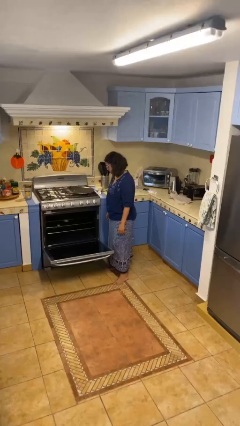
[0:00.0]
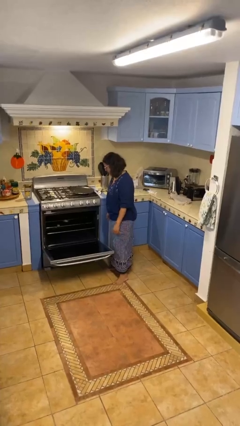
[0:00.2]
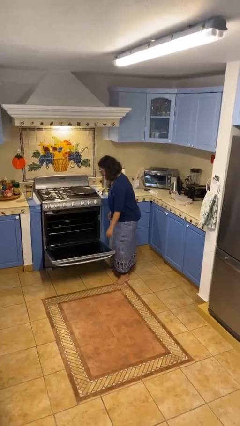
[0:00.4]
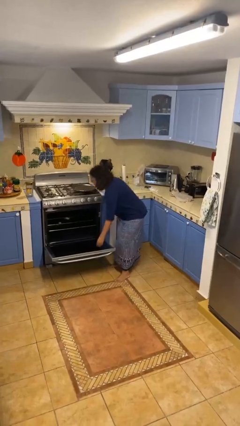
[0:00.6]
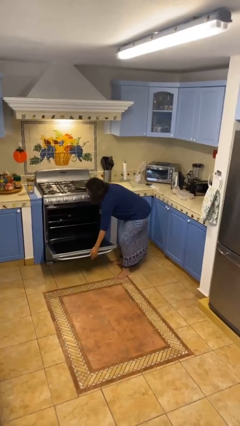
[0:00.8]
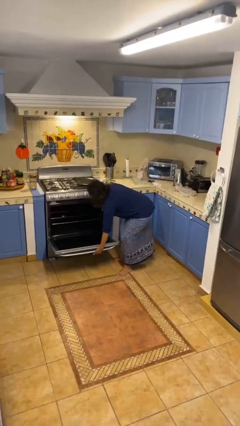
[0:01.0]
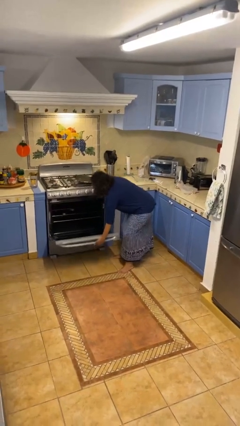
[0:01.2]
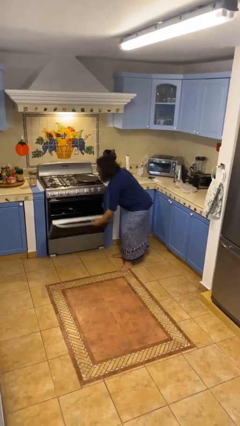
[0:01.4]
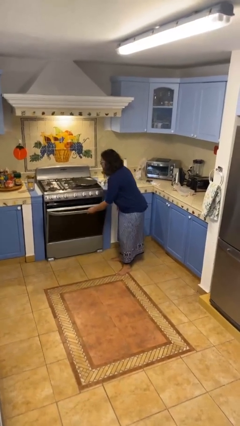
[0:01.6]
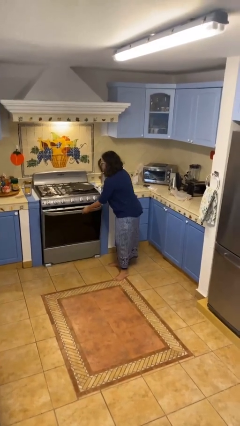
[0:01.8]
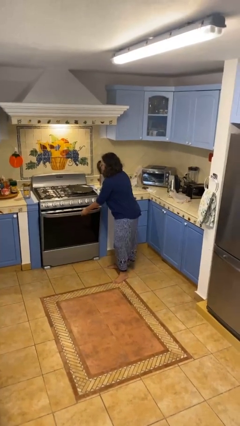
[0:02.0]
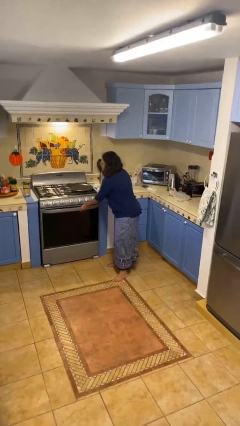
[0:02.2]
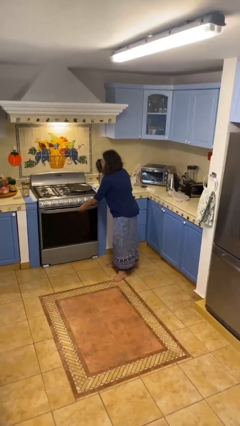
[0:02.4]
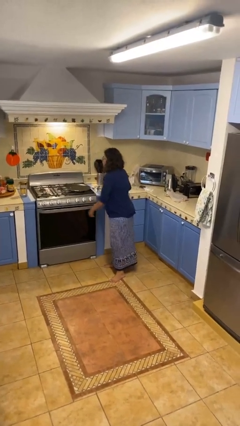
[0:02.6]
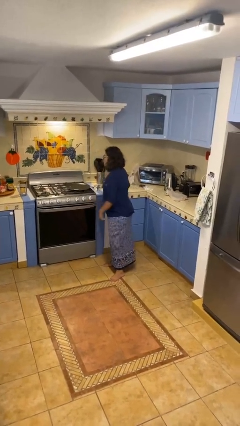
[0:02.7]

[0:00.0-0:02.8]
person closes oven door

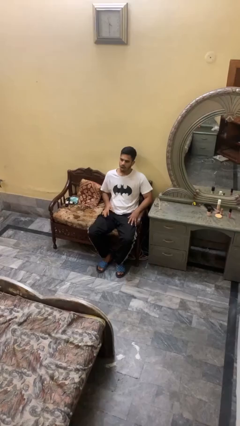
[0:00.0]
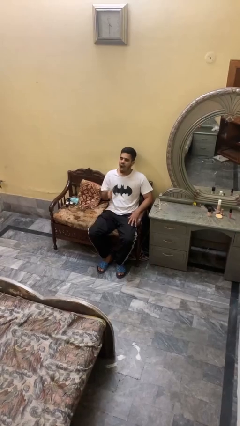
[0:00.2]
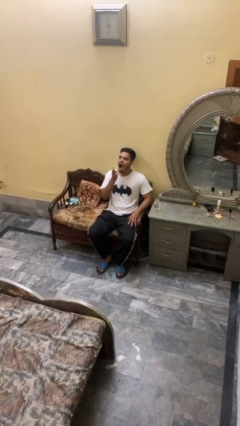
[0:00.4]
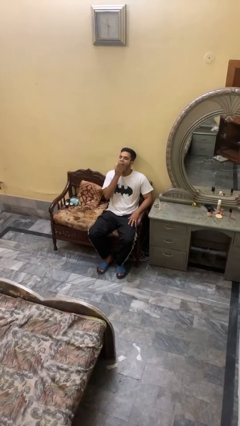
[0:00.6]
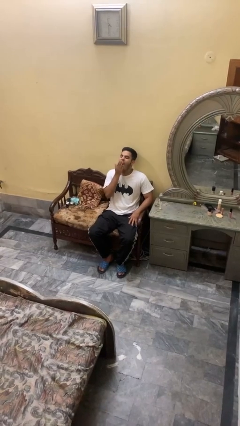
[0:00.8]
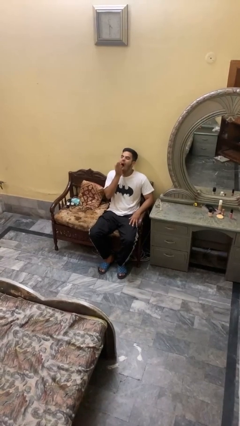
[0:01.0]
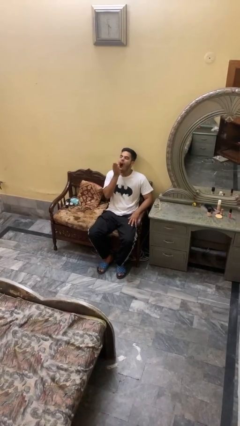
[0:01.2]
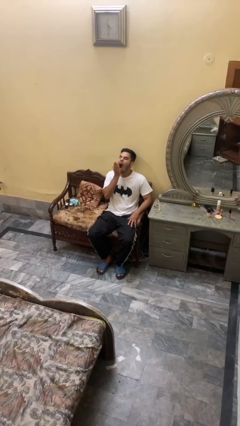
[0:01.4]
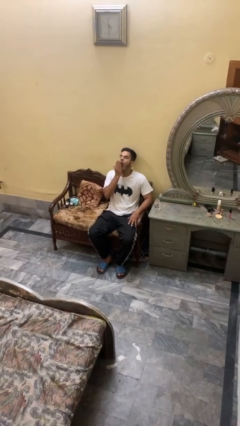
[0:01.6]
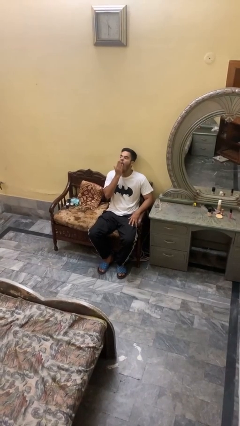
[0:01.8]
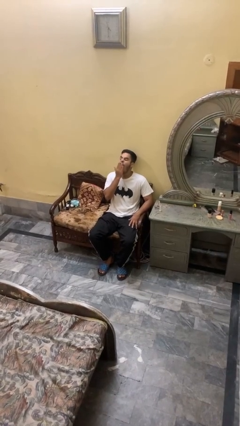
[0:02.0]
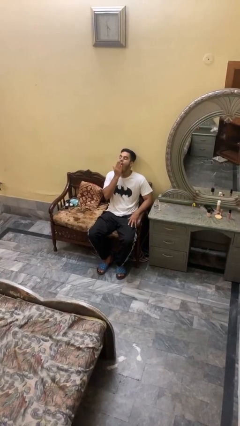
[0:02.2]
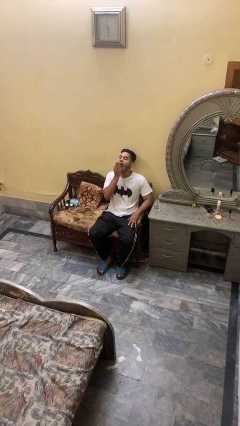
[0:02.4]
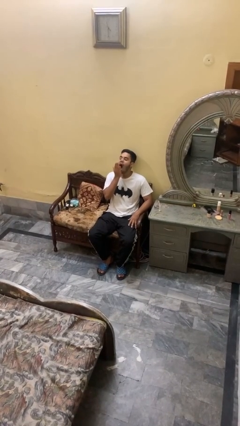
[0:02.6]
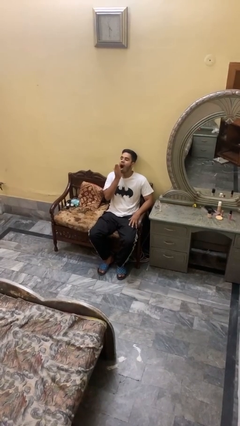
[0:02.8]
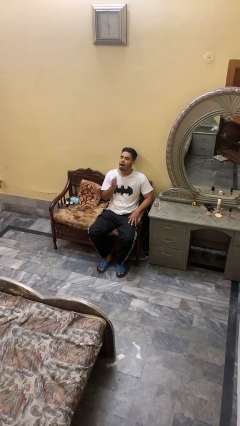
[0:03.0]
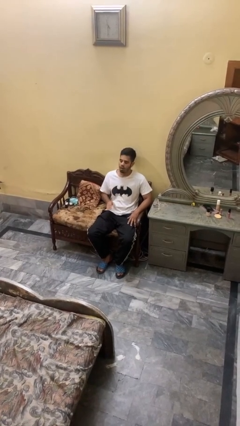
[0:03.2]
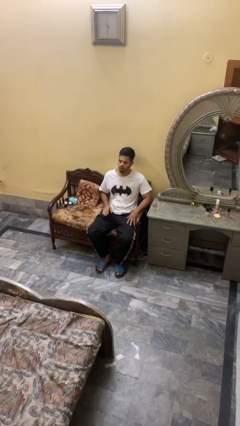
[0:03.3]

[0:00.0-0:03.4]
person yawns

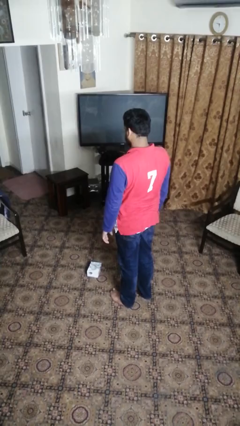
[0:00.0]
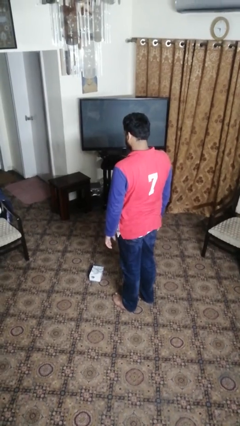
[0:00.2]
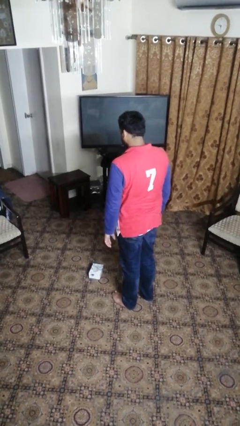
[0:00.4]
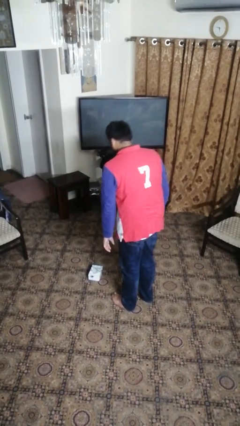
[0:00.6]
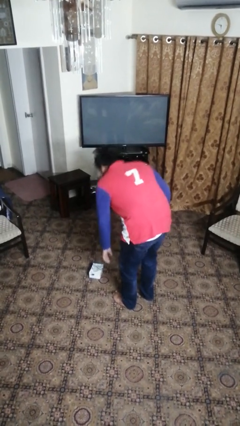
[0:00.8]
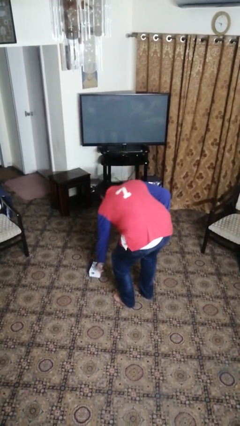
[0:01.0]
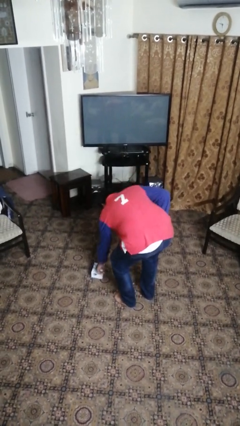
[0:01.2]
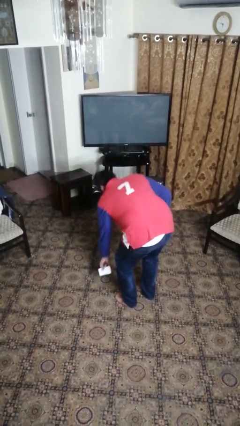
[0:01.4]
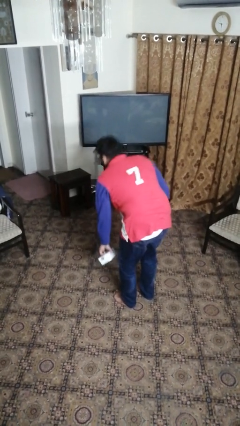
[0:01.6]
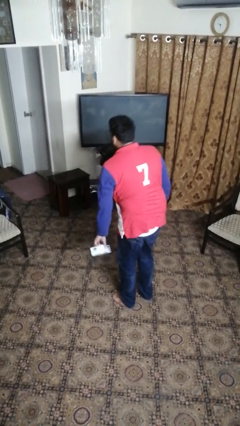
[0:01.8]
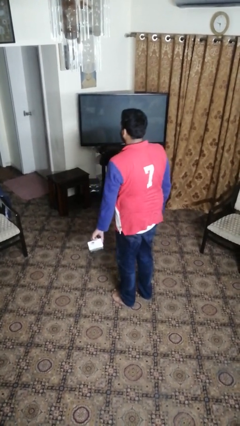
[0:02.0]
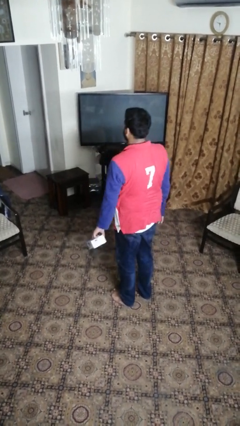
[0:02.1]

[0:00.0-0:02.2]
person picks up object from floor

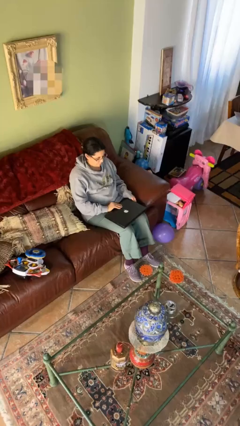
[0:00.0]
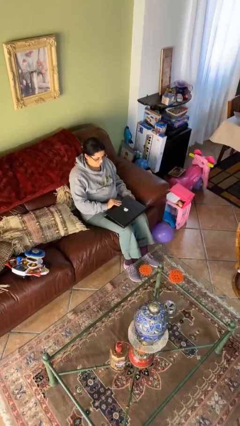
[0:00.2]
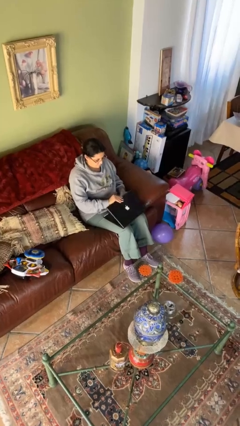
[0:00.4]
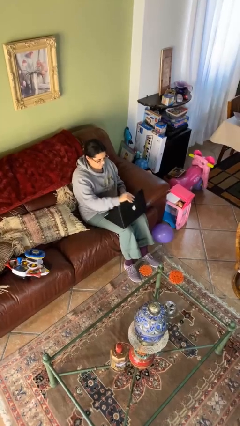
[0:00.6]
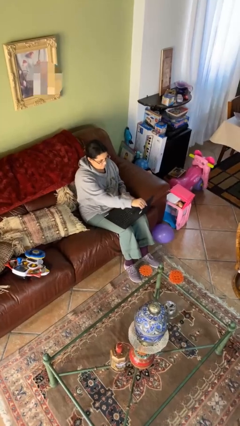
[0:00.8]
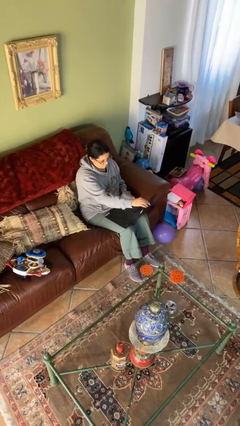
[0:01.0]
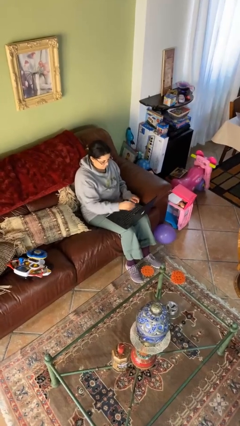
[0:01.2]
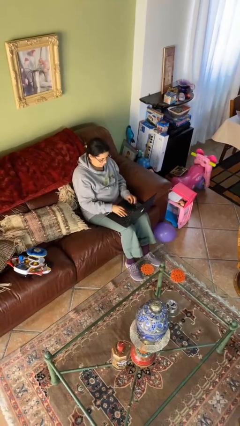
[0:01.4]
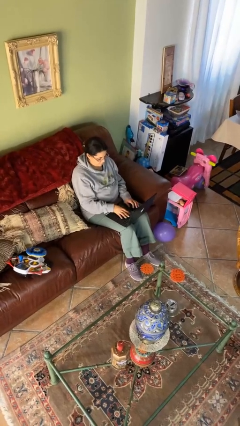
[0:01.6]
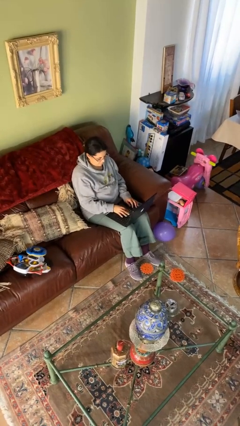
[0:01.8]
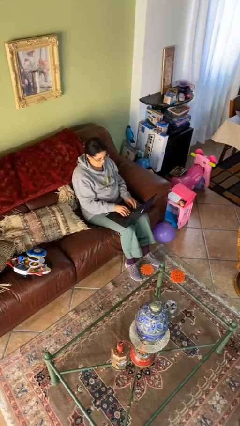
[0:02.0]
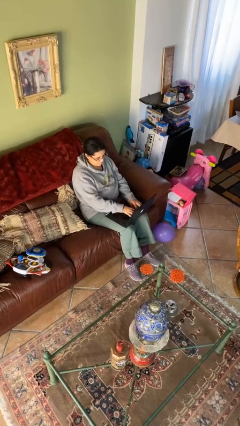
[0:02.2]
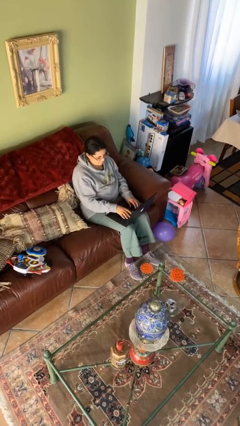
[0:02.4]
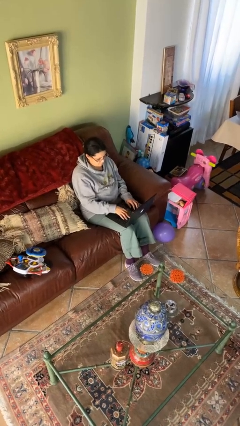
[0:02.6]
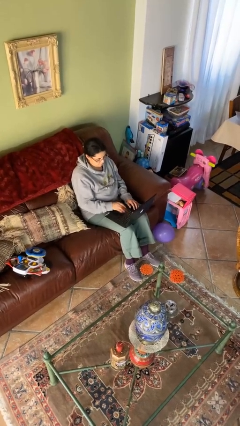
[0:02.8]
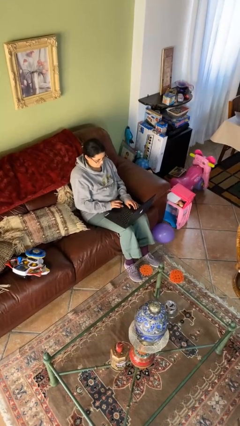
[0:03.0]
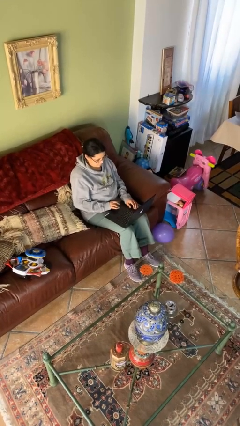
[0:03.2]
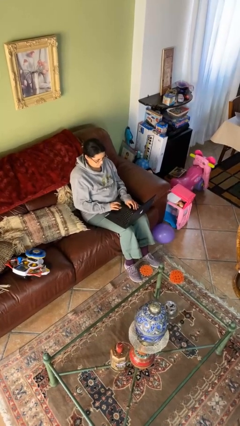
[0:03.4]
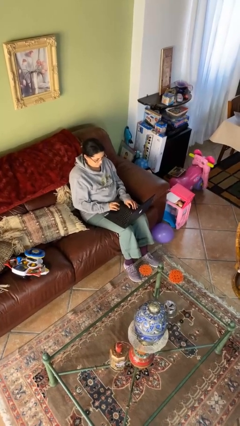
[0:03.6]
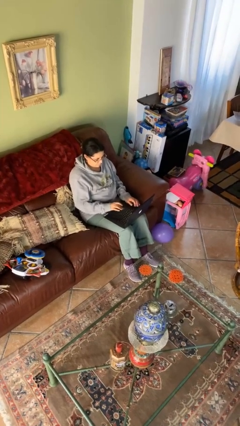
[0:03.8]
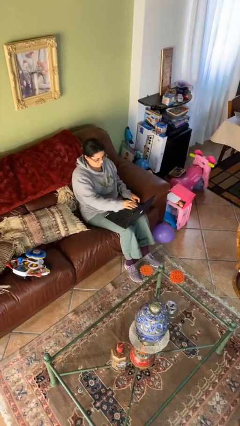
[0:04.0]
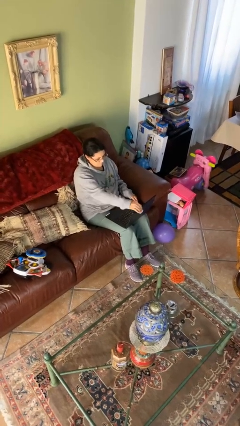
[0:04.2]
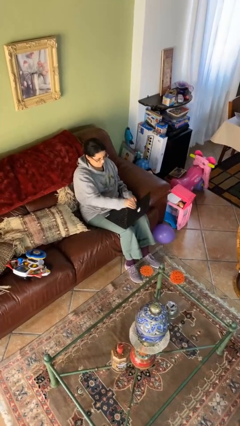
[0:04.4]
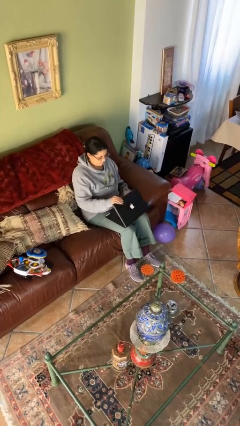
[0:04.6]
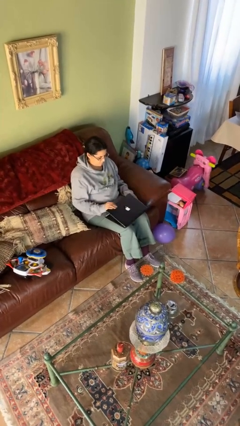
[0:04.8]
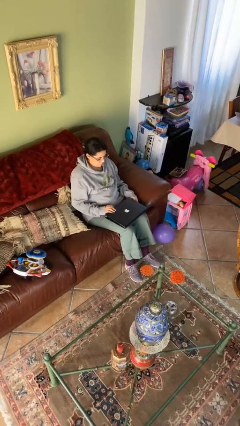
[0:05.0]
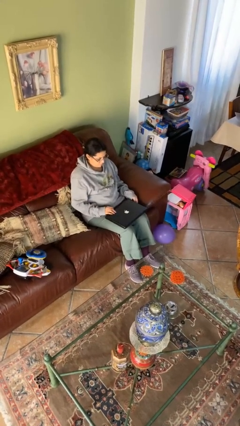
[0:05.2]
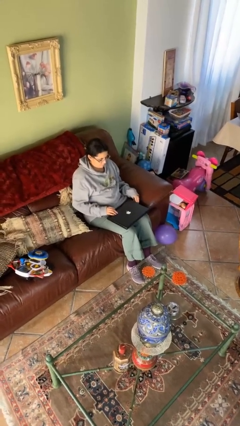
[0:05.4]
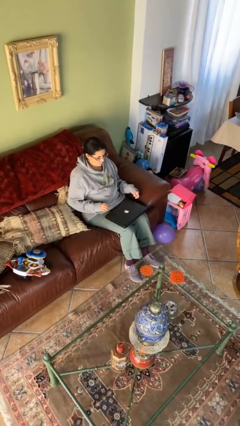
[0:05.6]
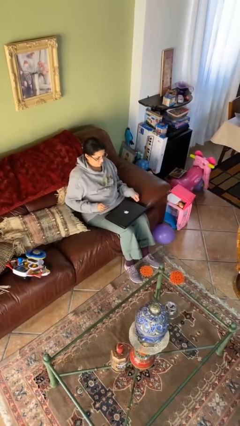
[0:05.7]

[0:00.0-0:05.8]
person interacts with laptop

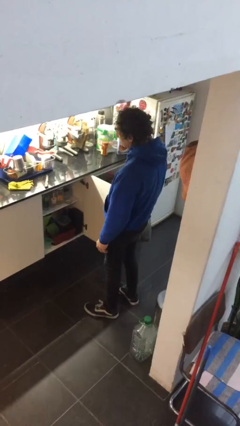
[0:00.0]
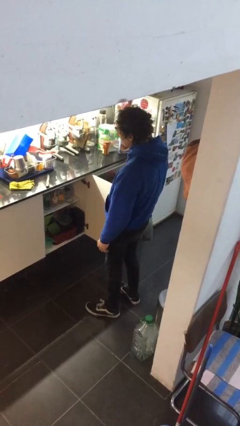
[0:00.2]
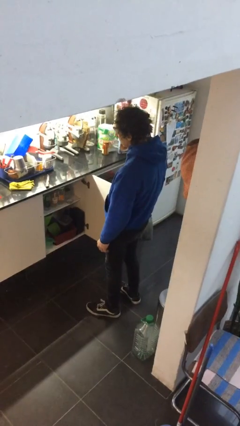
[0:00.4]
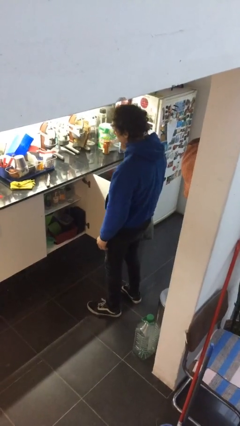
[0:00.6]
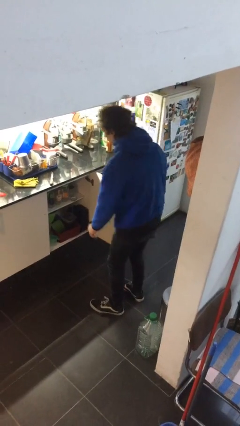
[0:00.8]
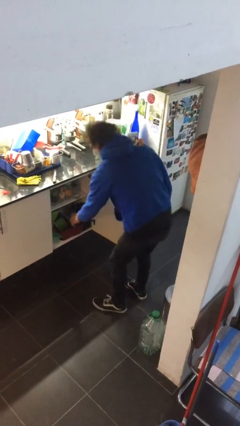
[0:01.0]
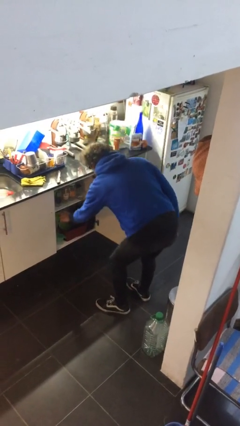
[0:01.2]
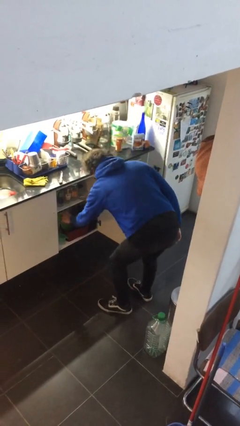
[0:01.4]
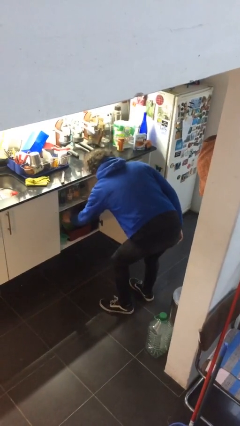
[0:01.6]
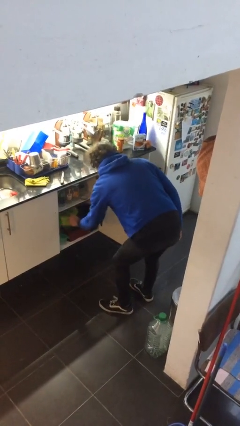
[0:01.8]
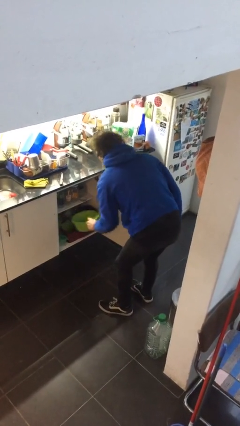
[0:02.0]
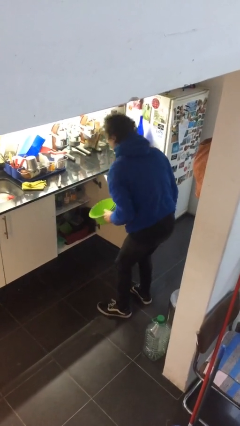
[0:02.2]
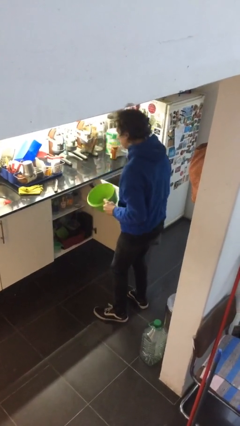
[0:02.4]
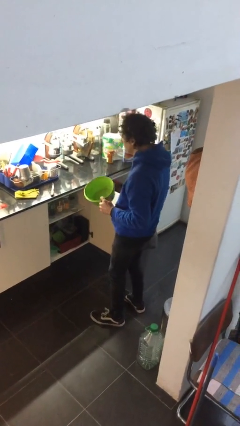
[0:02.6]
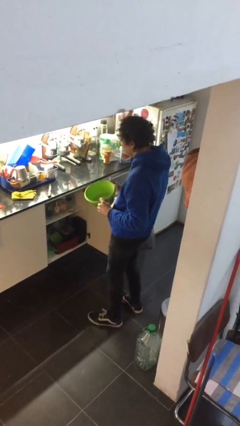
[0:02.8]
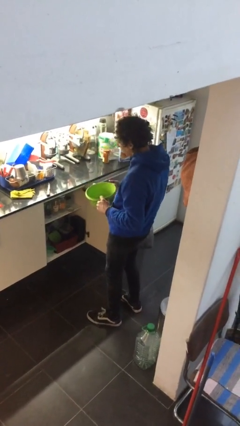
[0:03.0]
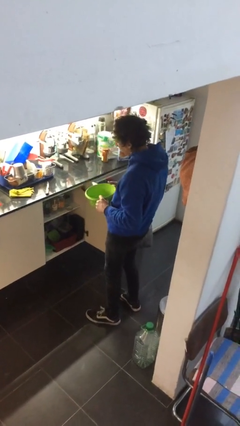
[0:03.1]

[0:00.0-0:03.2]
person picks up object from cabinet
